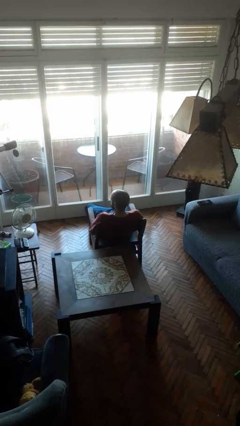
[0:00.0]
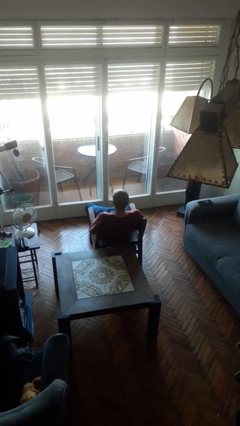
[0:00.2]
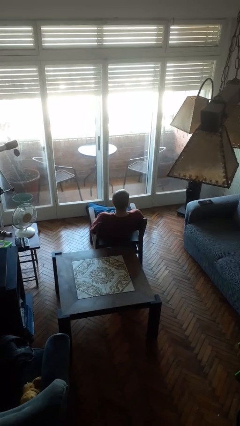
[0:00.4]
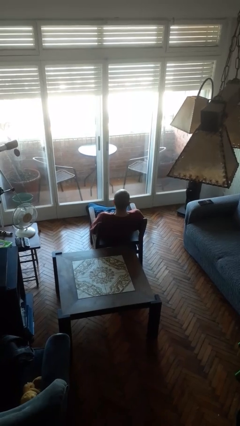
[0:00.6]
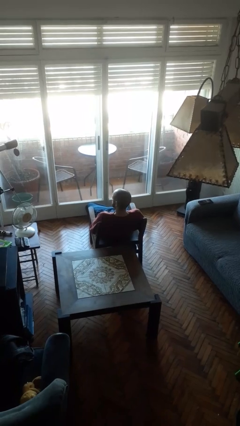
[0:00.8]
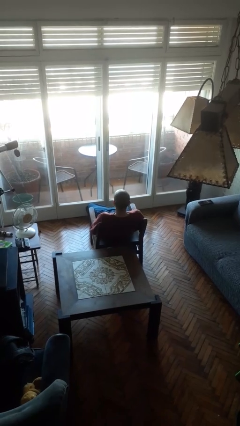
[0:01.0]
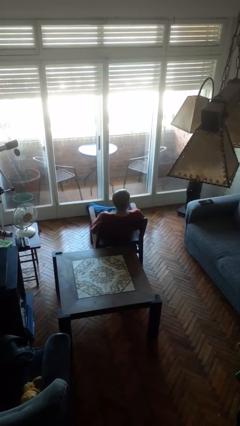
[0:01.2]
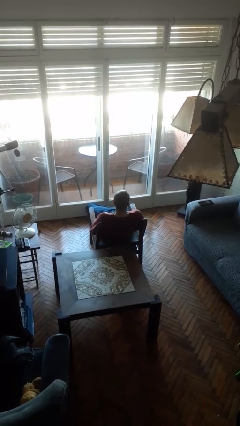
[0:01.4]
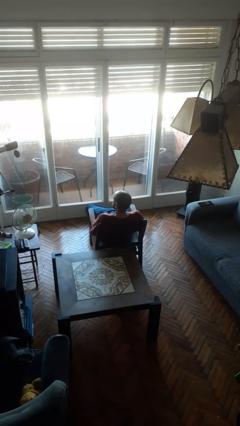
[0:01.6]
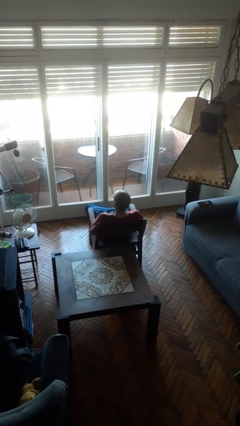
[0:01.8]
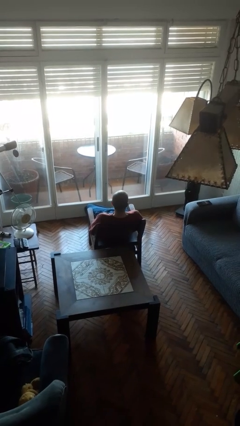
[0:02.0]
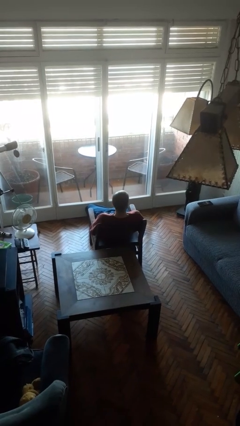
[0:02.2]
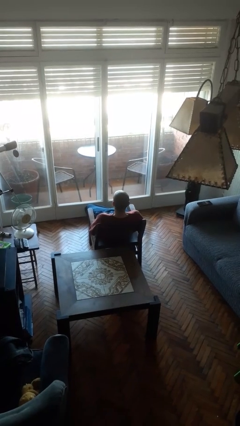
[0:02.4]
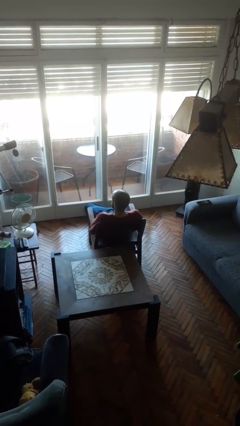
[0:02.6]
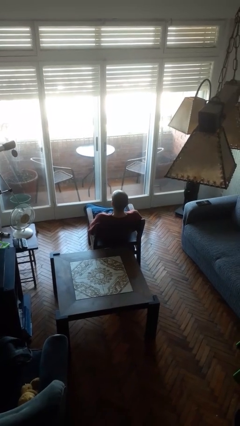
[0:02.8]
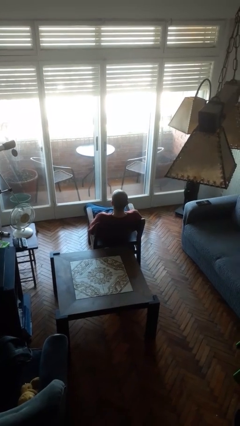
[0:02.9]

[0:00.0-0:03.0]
person shakes head

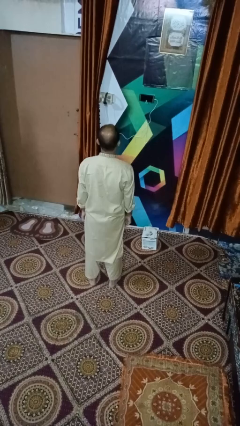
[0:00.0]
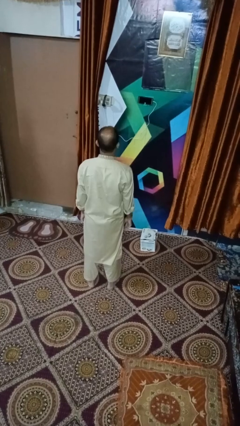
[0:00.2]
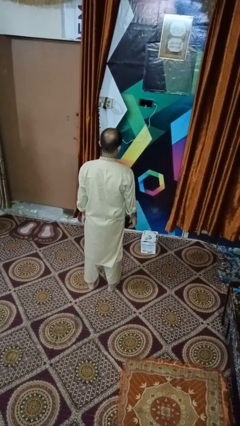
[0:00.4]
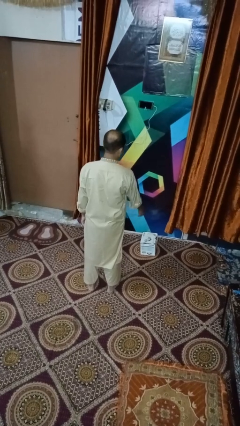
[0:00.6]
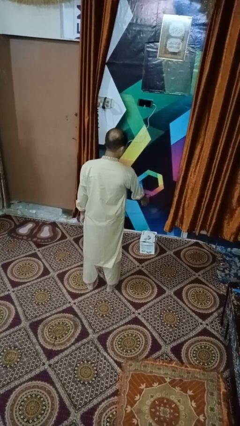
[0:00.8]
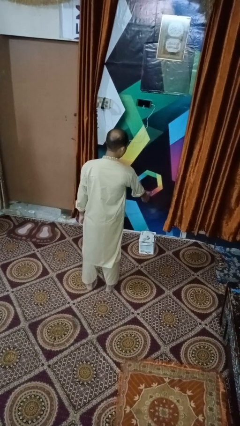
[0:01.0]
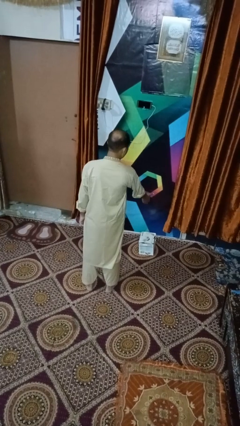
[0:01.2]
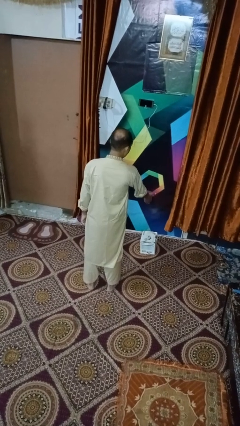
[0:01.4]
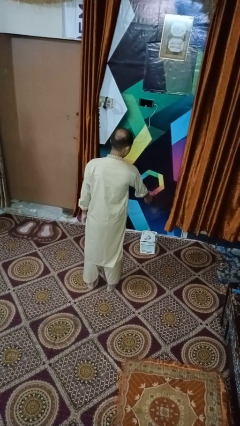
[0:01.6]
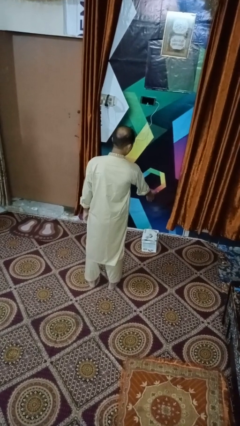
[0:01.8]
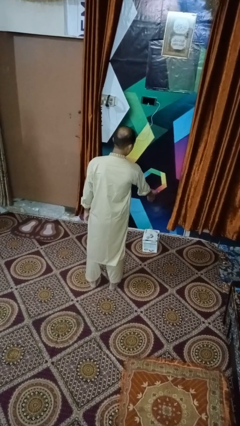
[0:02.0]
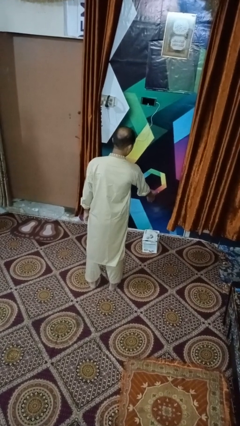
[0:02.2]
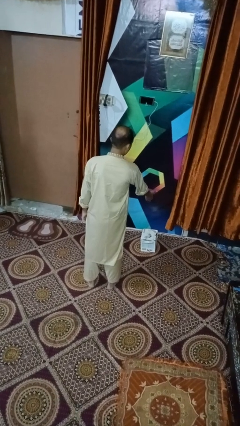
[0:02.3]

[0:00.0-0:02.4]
person waves hand over object

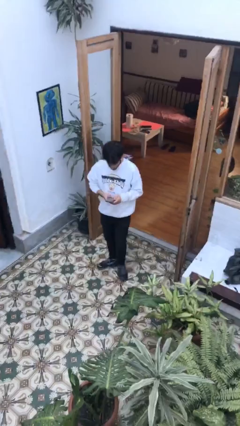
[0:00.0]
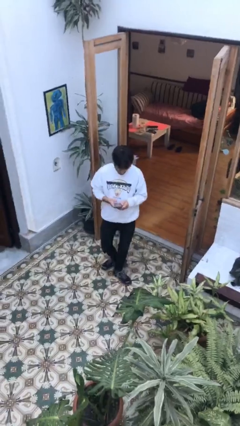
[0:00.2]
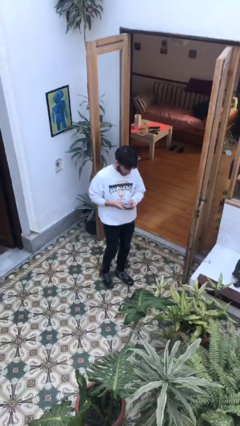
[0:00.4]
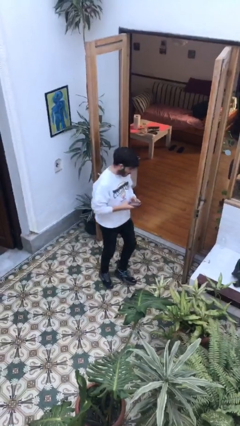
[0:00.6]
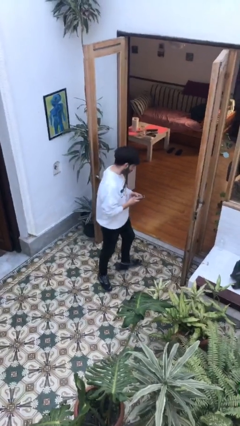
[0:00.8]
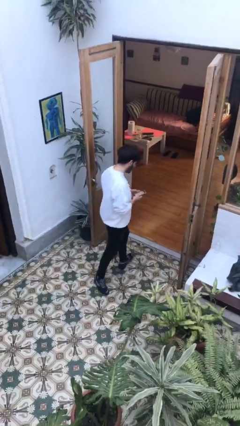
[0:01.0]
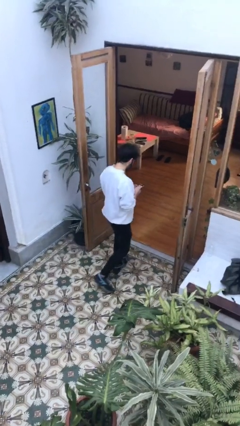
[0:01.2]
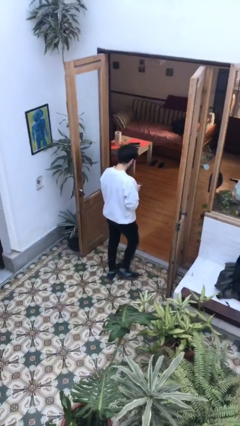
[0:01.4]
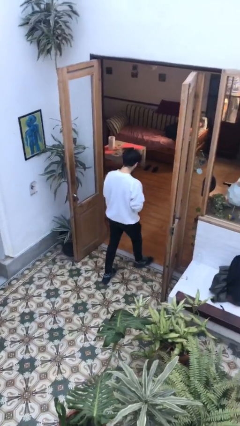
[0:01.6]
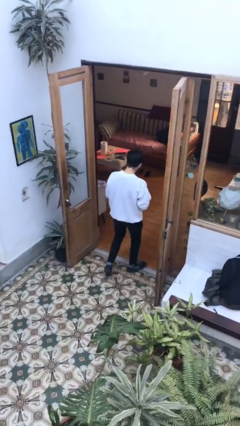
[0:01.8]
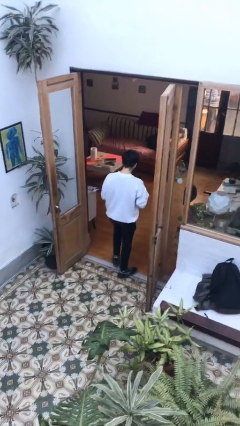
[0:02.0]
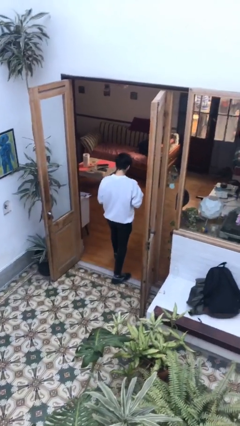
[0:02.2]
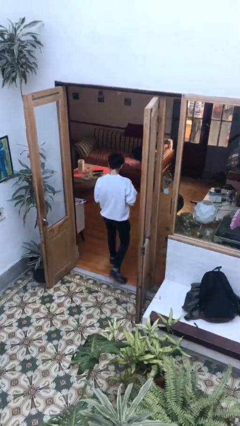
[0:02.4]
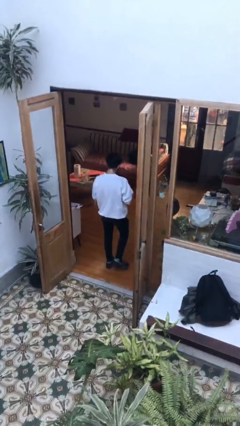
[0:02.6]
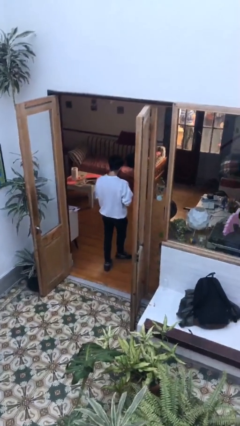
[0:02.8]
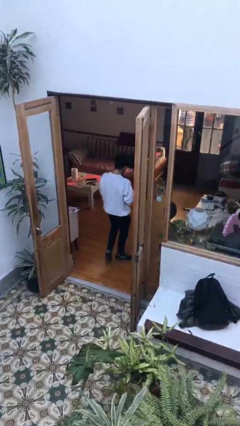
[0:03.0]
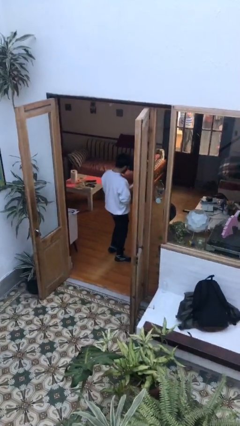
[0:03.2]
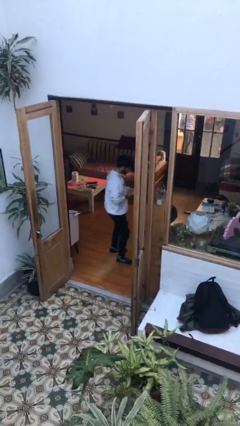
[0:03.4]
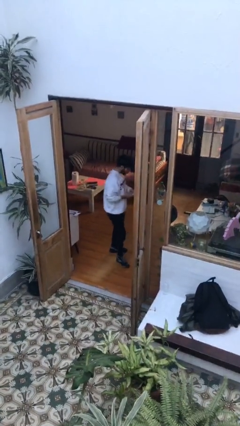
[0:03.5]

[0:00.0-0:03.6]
person exits scene through structure

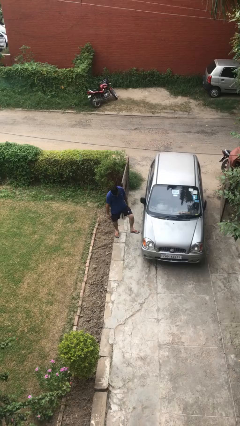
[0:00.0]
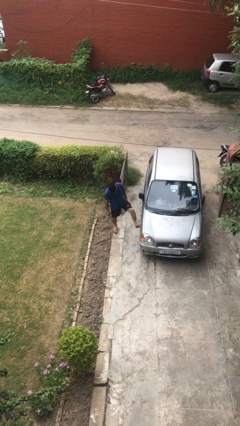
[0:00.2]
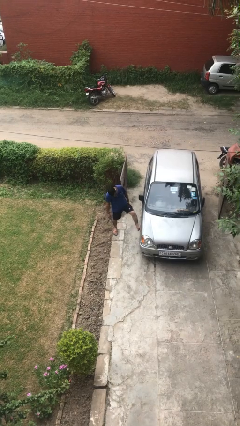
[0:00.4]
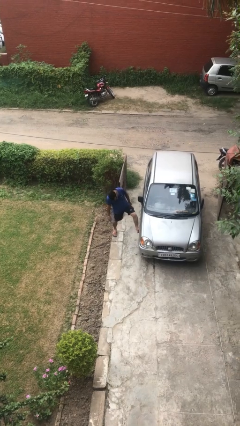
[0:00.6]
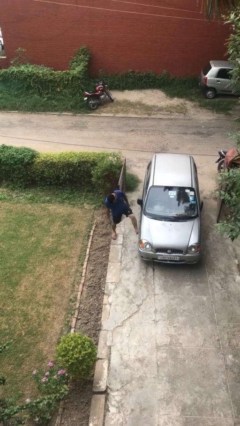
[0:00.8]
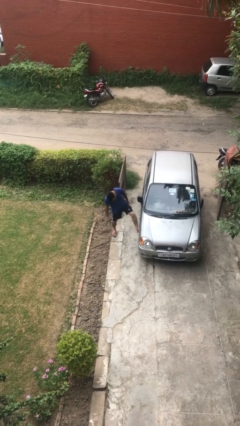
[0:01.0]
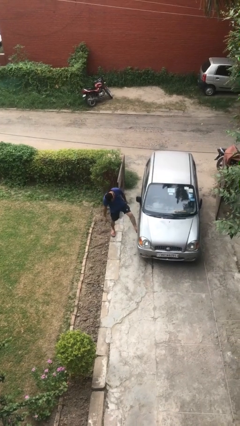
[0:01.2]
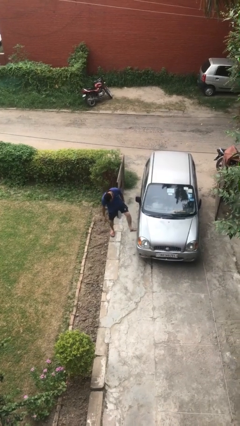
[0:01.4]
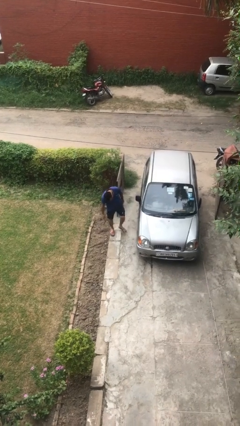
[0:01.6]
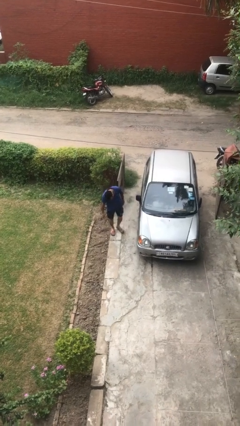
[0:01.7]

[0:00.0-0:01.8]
person kicks car tires

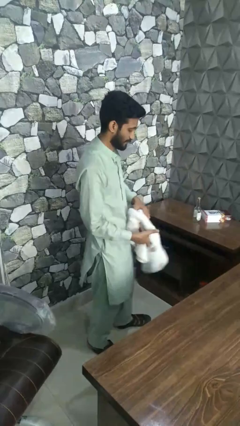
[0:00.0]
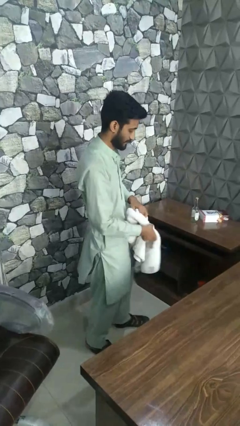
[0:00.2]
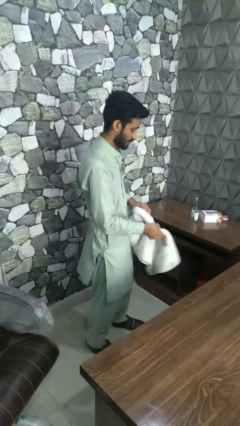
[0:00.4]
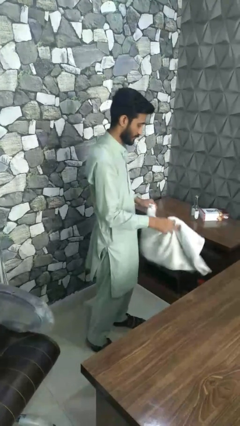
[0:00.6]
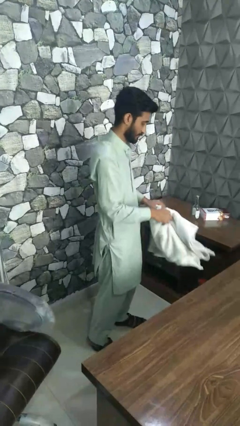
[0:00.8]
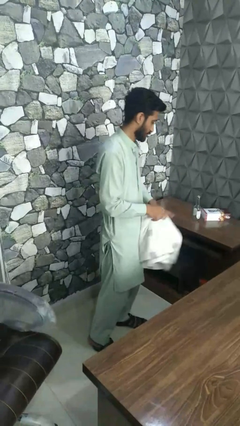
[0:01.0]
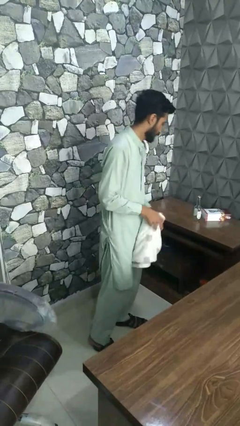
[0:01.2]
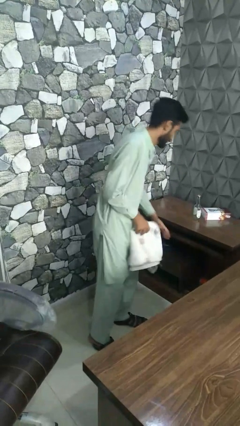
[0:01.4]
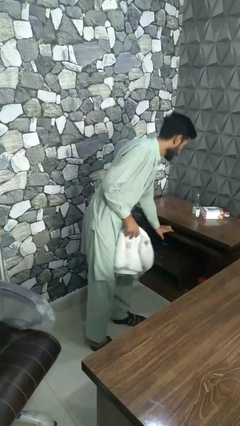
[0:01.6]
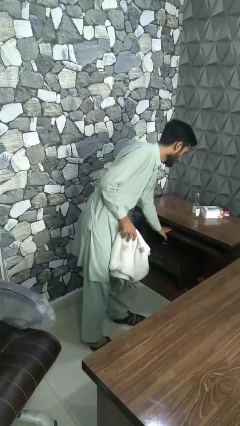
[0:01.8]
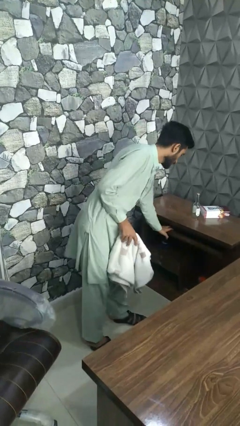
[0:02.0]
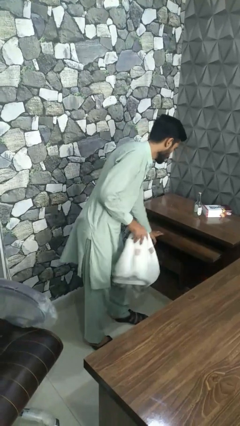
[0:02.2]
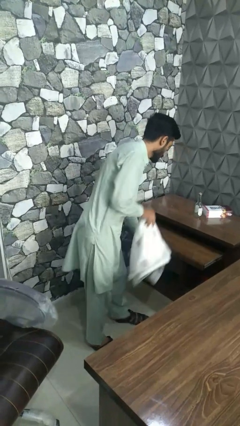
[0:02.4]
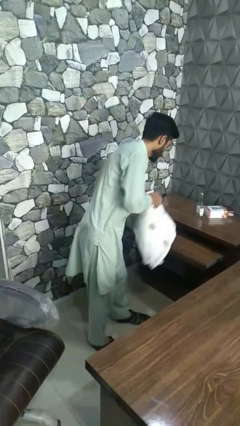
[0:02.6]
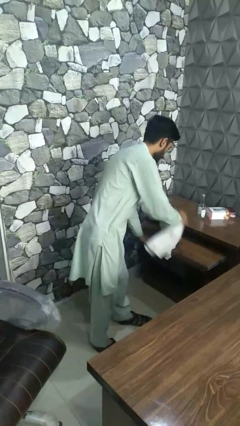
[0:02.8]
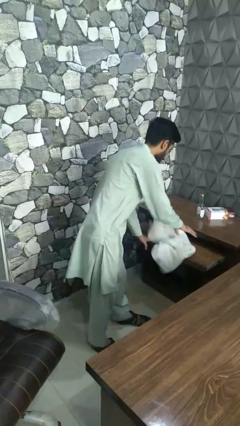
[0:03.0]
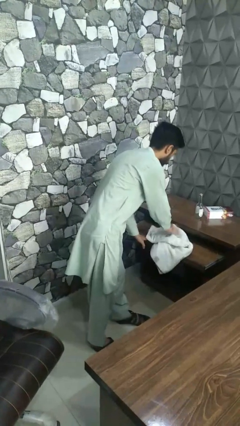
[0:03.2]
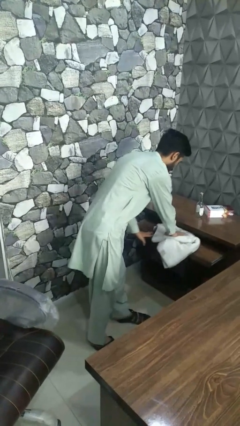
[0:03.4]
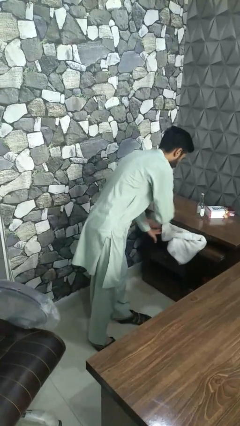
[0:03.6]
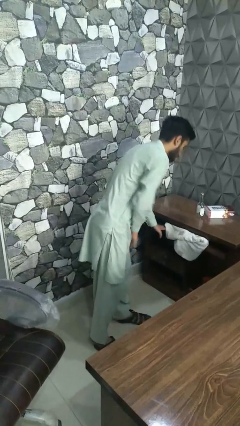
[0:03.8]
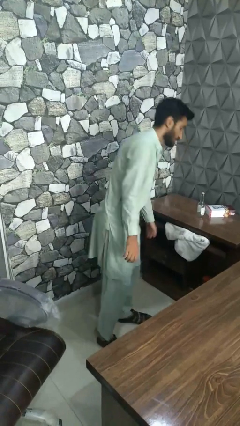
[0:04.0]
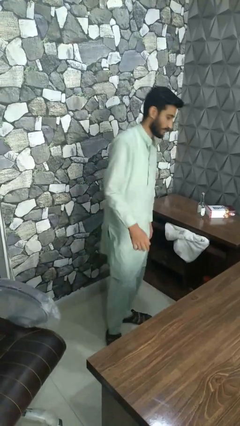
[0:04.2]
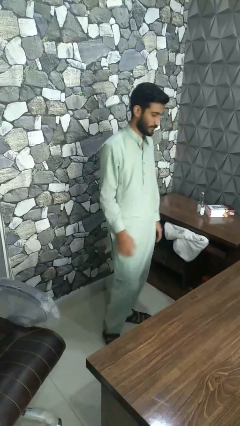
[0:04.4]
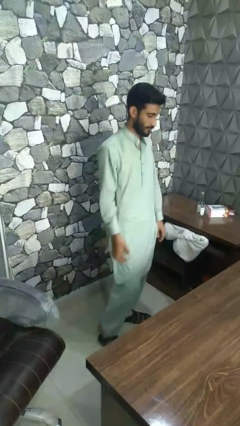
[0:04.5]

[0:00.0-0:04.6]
person puts clothes into dresser

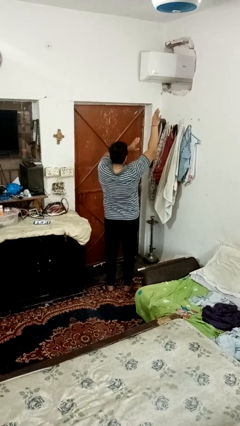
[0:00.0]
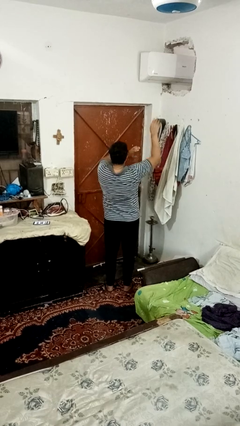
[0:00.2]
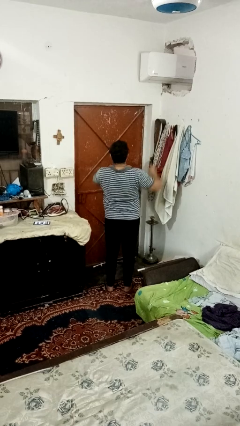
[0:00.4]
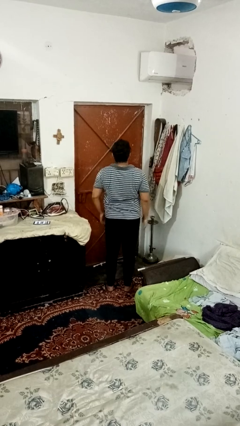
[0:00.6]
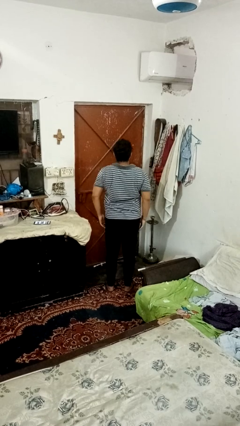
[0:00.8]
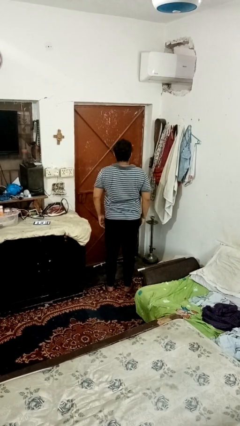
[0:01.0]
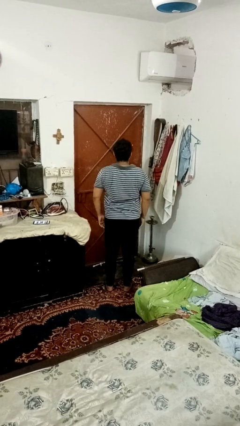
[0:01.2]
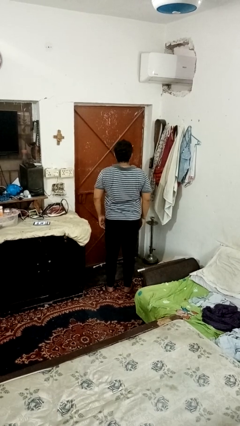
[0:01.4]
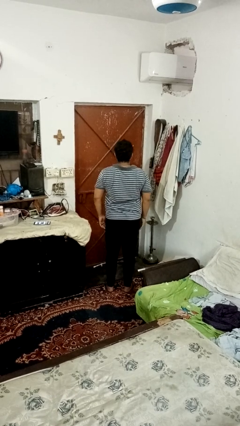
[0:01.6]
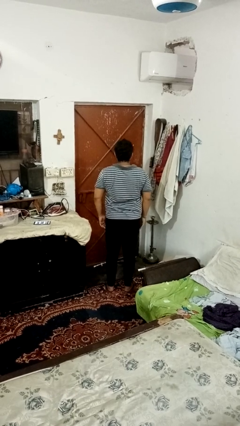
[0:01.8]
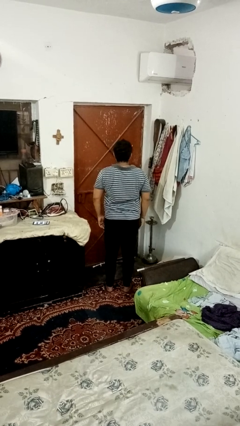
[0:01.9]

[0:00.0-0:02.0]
person dances in place
